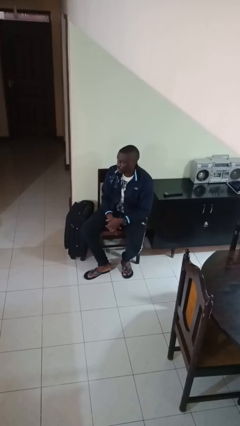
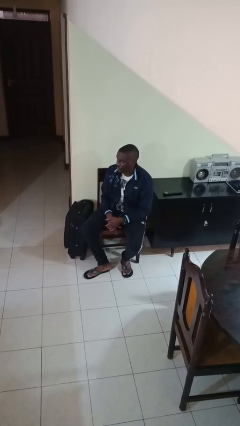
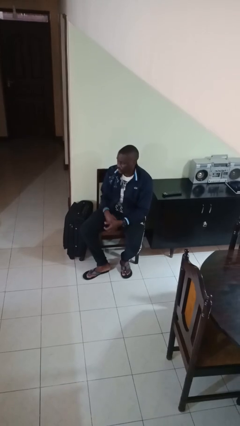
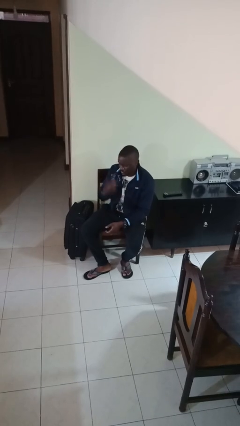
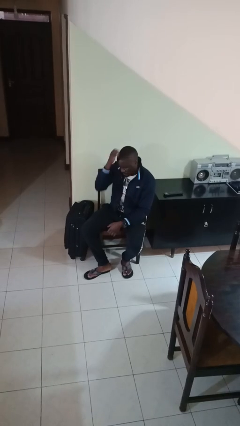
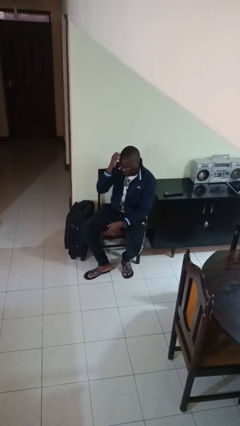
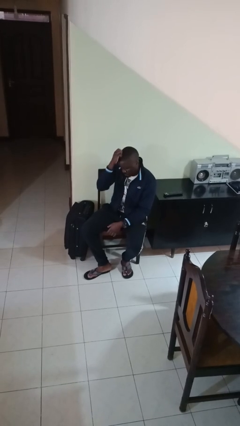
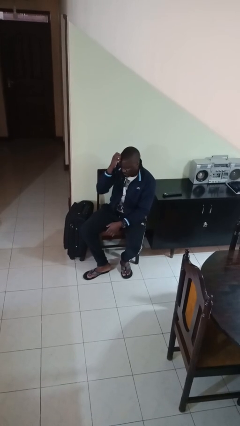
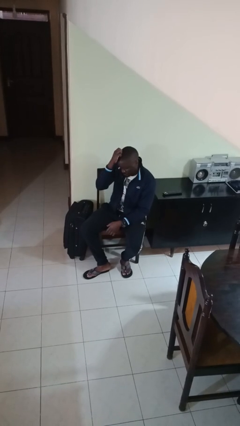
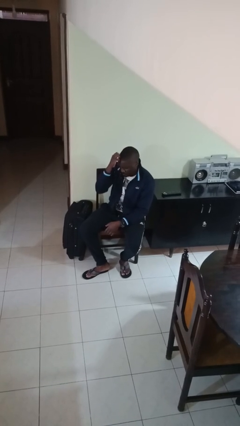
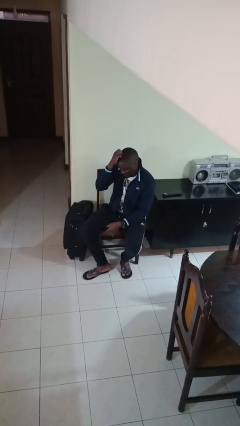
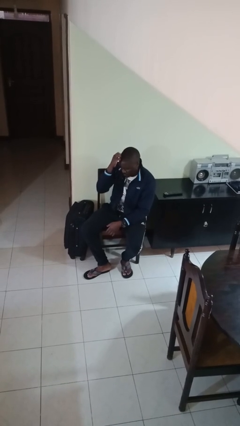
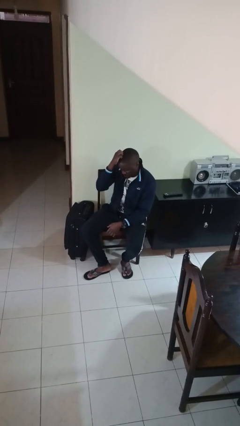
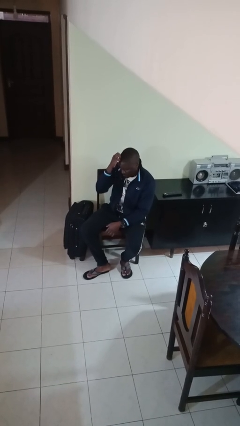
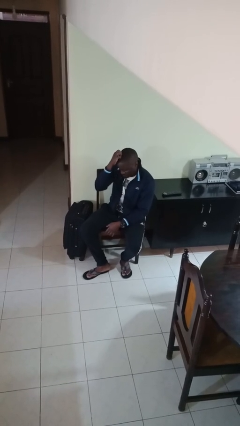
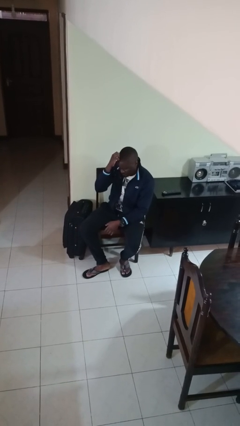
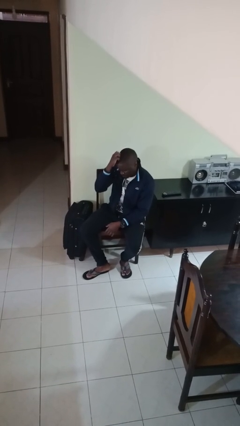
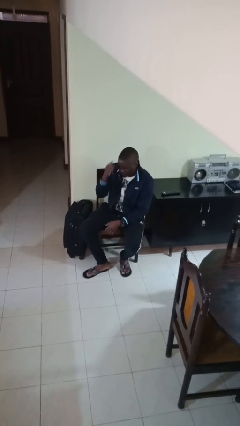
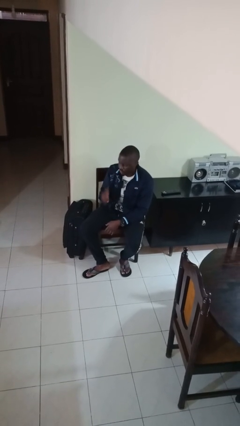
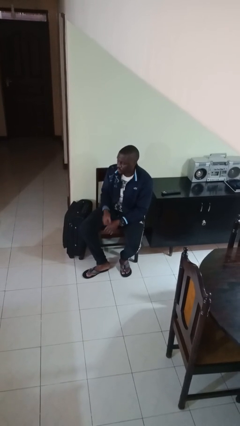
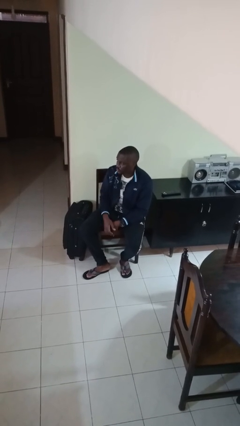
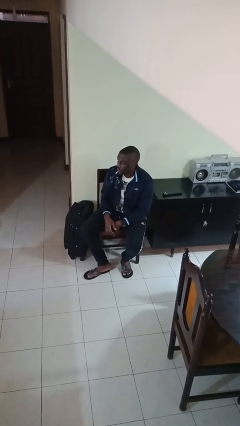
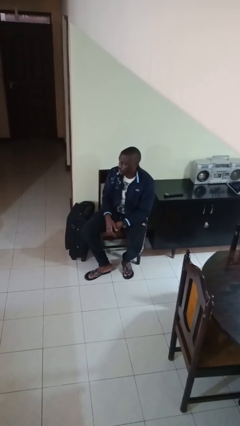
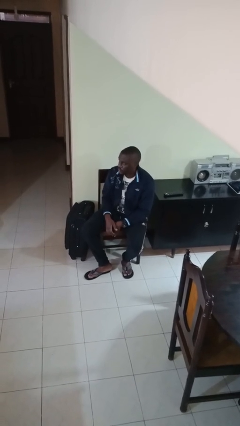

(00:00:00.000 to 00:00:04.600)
person scratches face

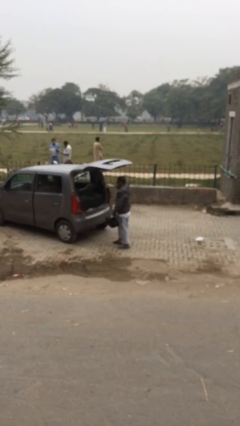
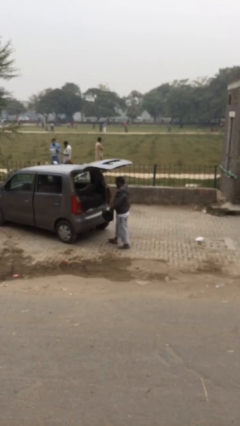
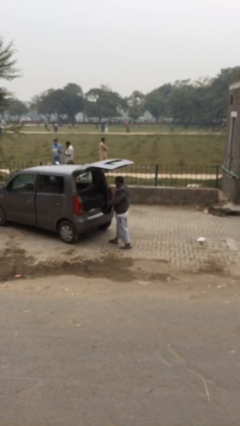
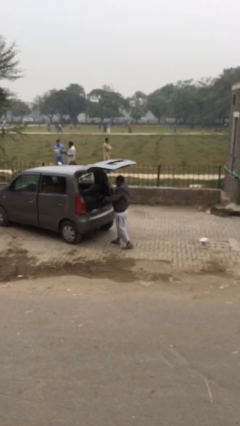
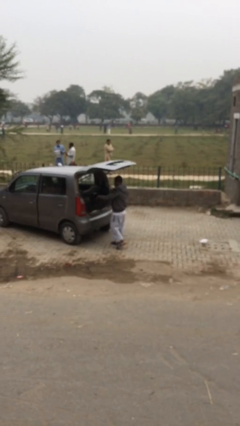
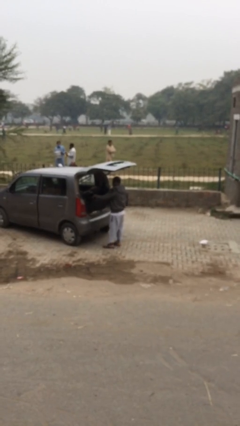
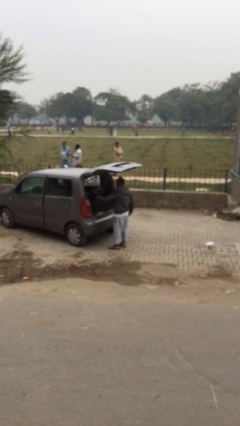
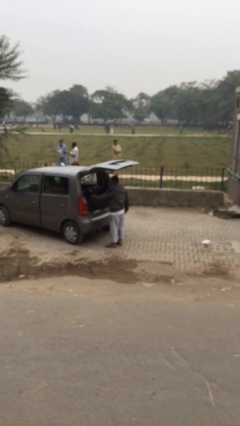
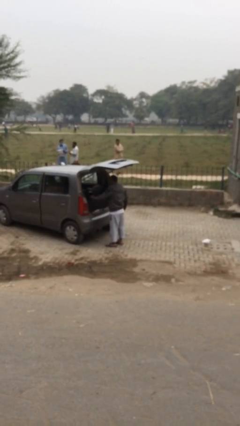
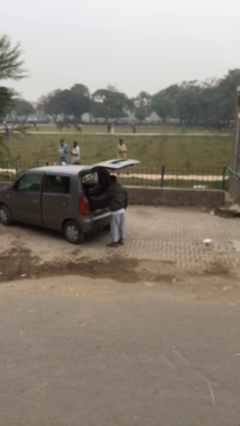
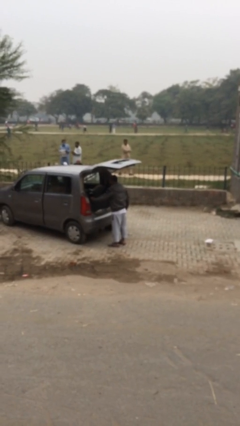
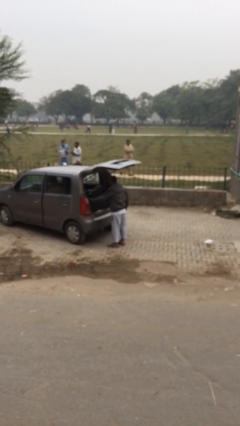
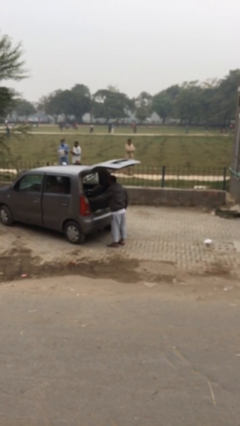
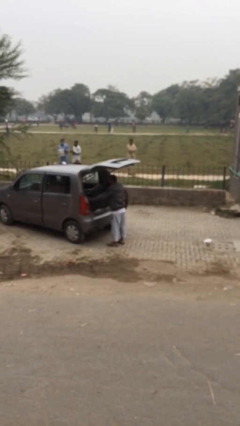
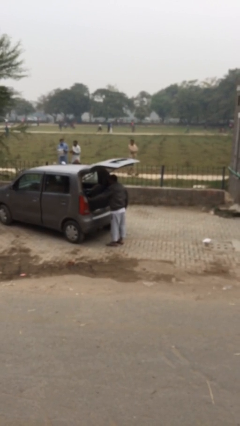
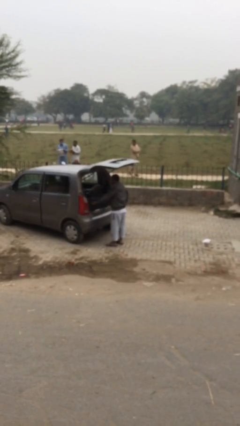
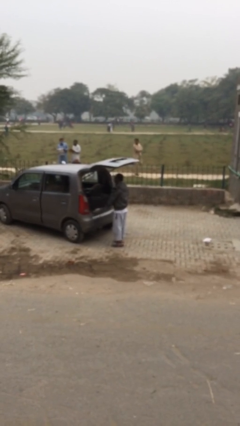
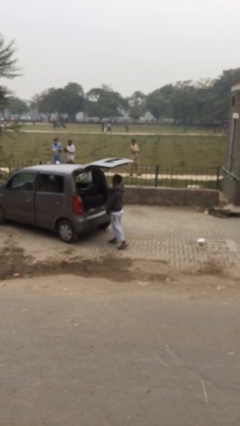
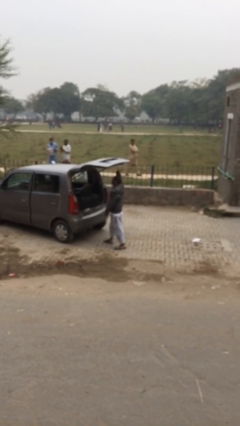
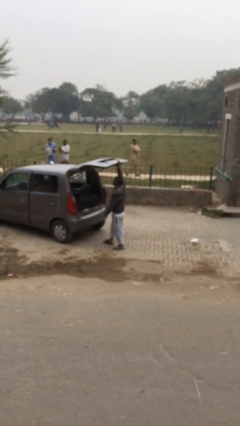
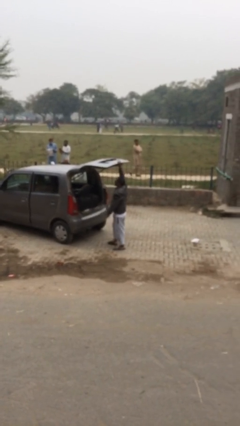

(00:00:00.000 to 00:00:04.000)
person loads car

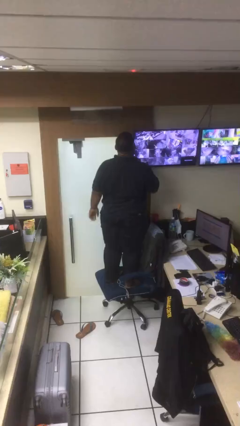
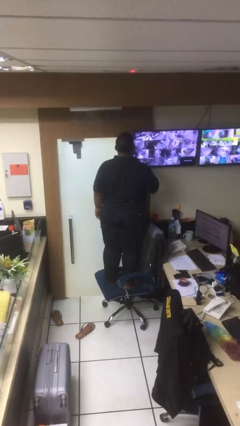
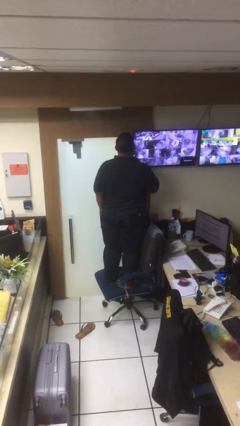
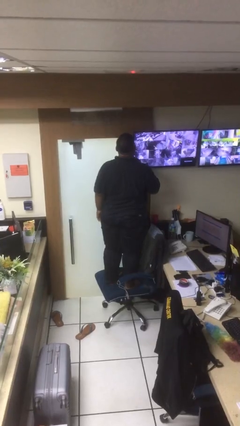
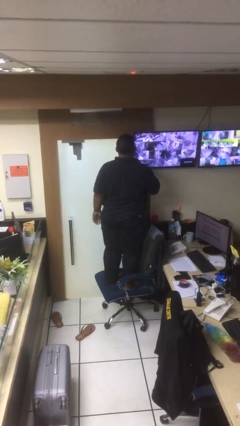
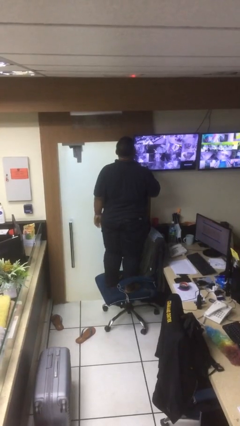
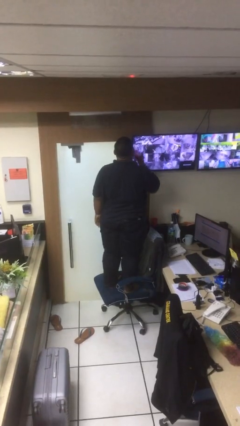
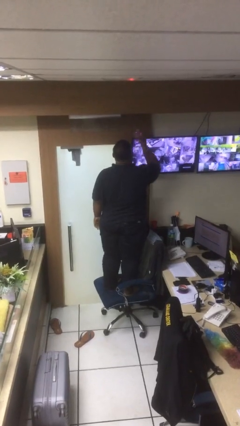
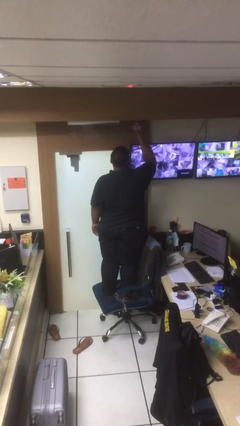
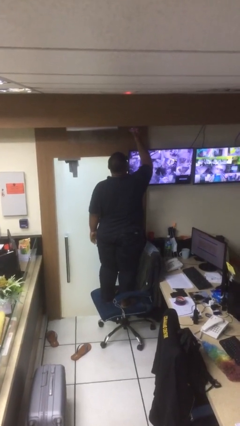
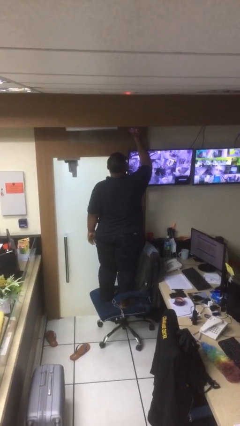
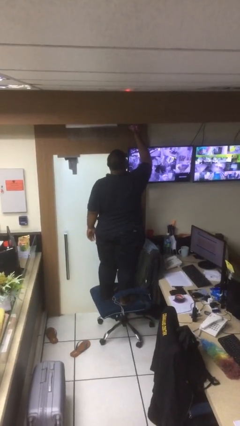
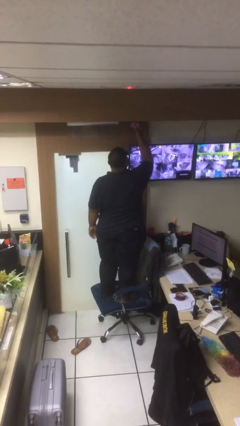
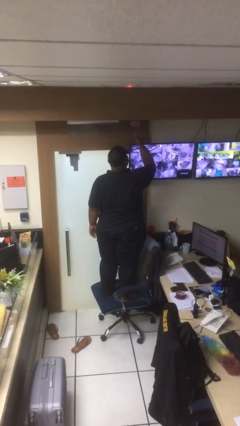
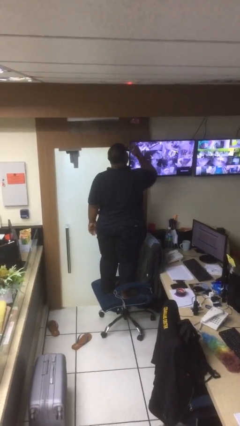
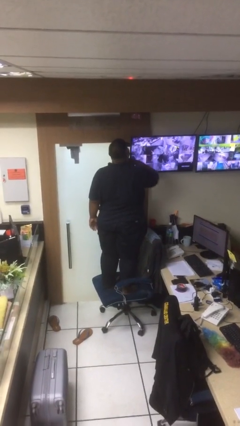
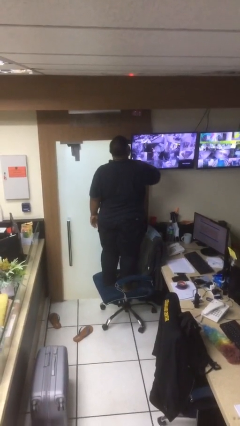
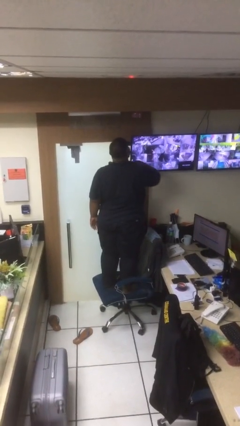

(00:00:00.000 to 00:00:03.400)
person puts up smoke detector

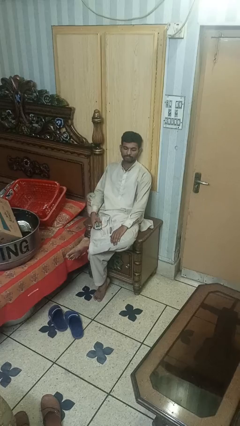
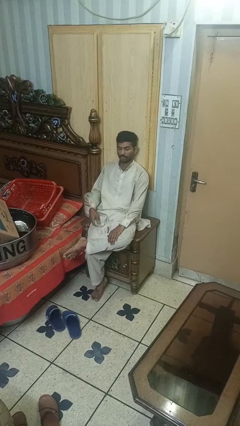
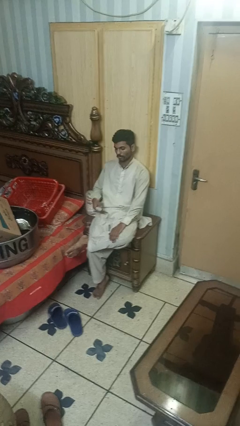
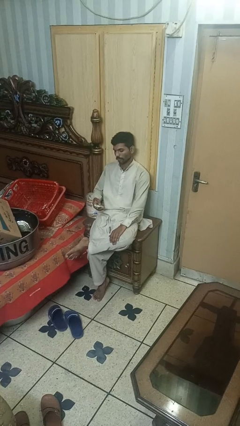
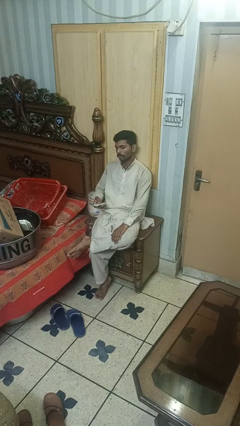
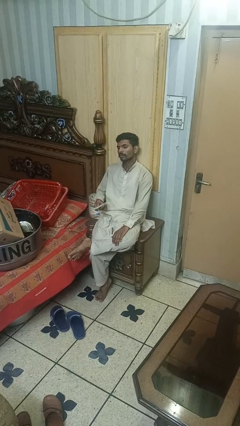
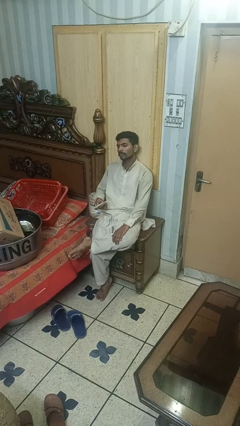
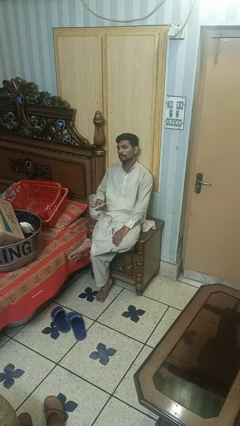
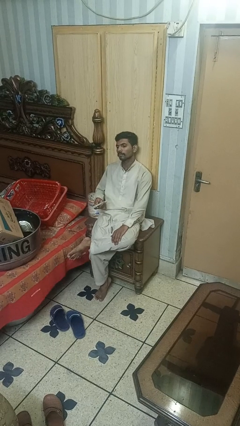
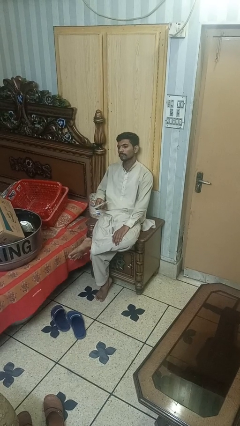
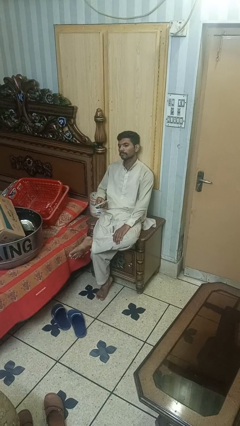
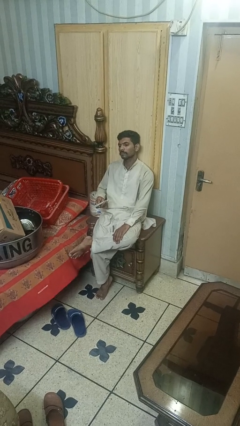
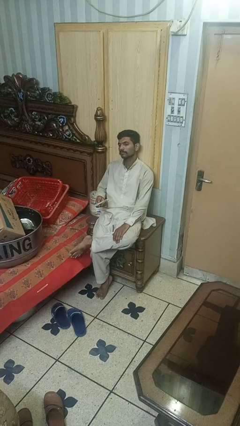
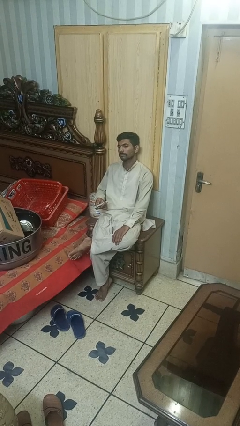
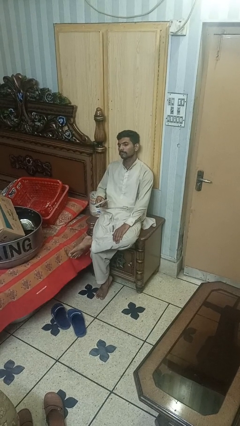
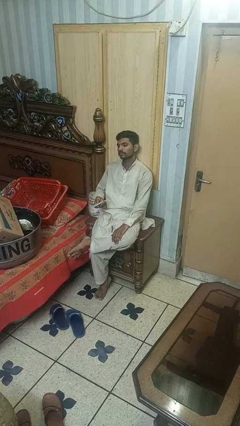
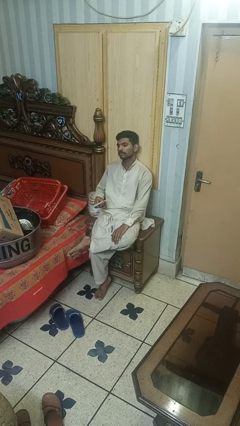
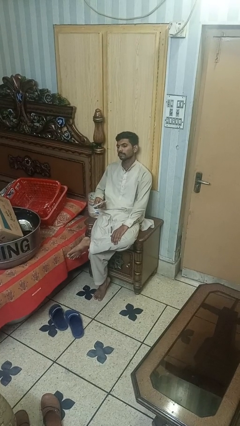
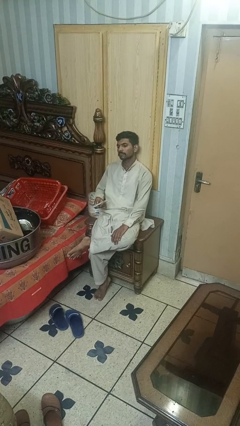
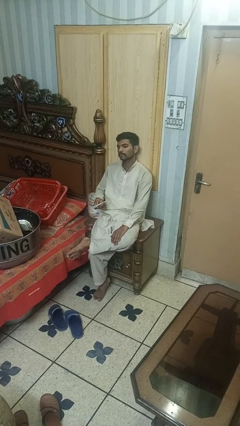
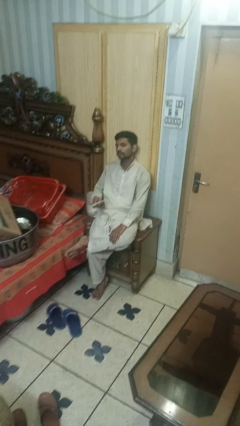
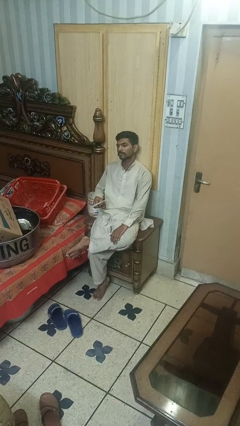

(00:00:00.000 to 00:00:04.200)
person uses television remote

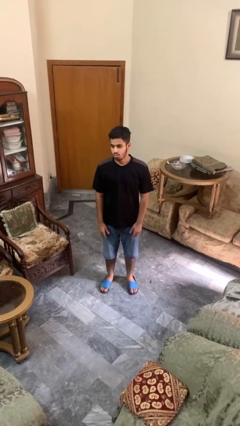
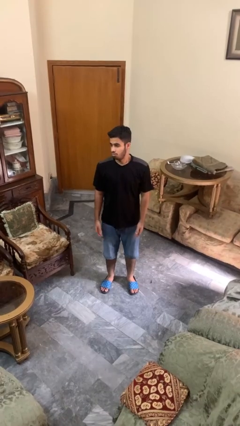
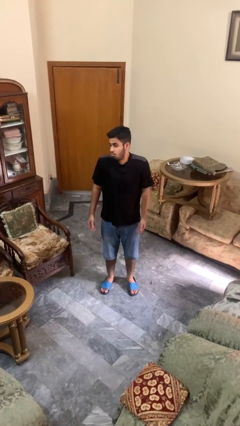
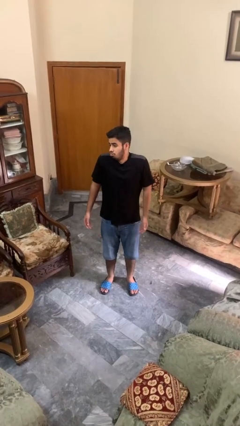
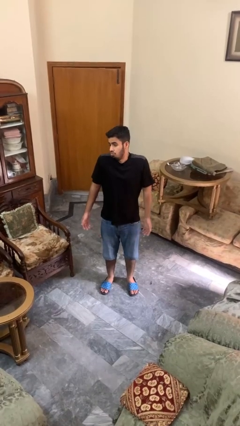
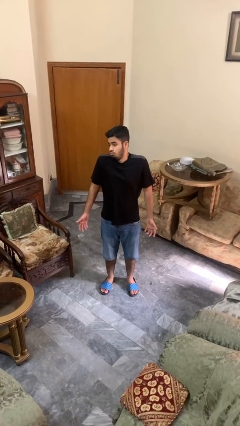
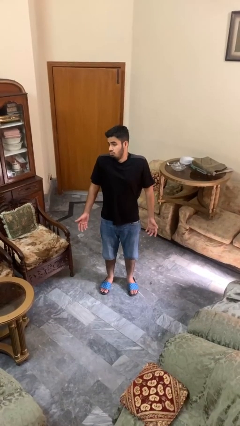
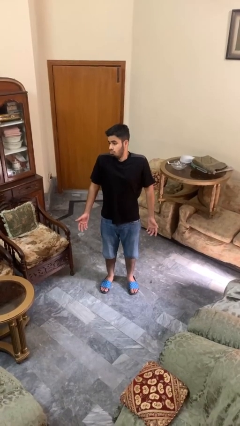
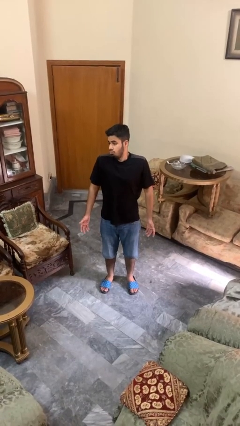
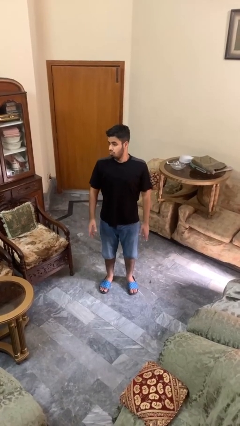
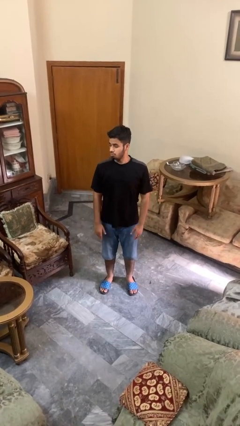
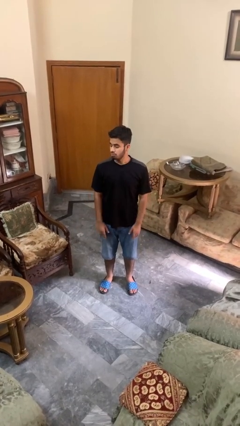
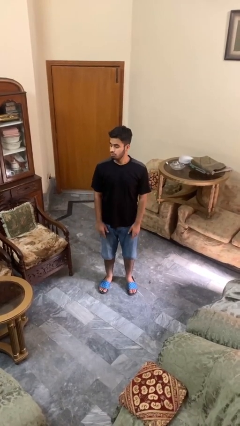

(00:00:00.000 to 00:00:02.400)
person shrugs
